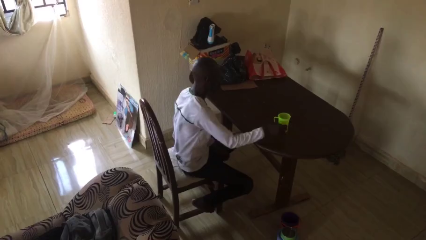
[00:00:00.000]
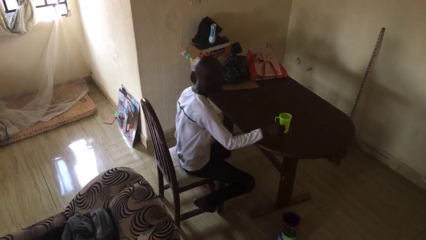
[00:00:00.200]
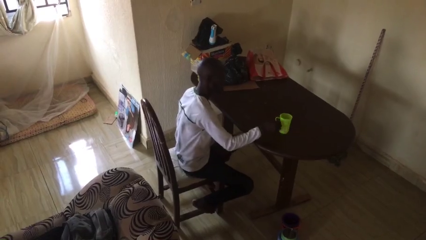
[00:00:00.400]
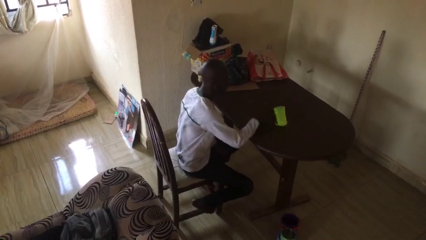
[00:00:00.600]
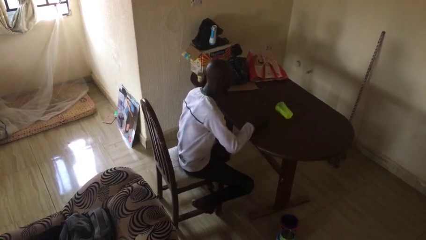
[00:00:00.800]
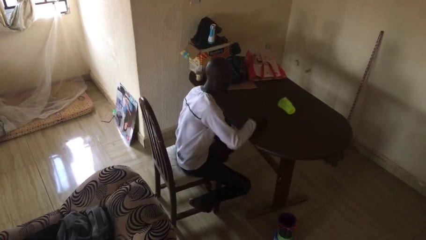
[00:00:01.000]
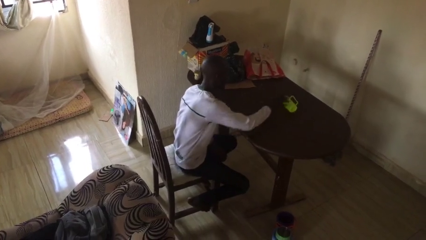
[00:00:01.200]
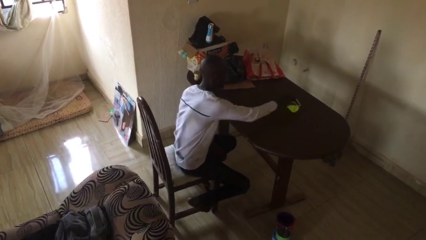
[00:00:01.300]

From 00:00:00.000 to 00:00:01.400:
person knocks over glass

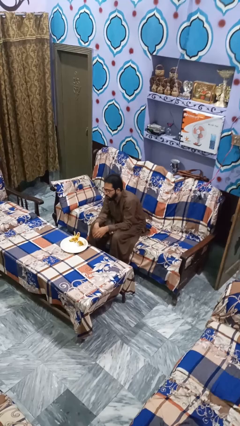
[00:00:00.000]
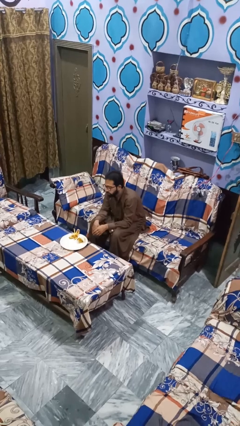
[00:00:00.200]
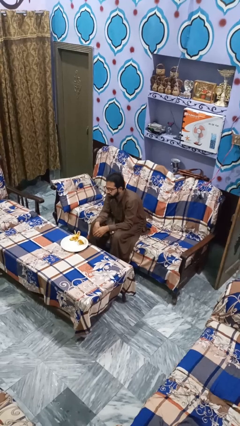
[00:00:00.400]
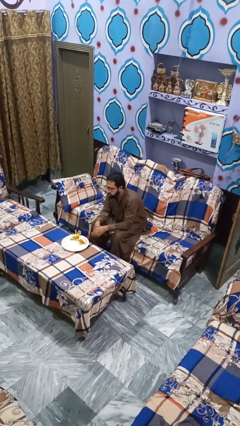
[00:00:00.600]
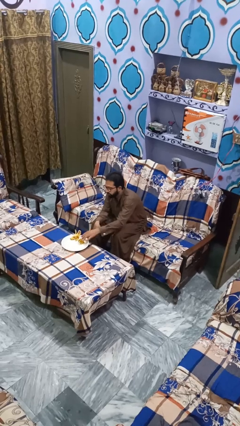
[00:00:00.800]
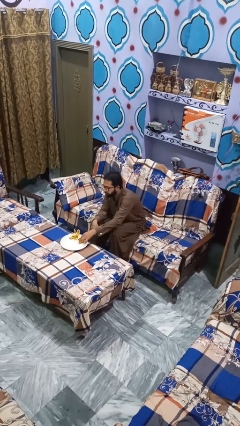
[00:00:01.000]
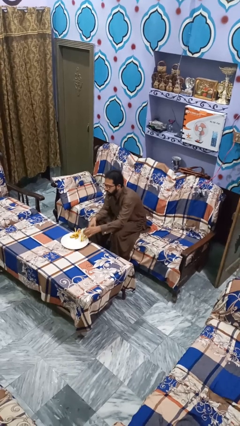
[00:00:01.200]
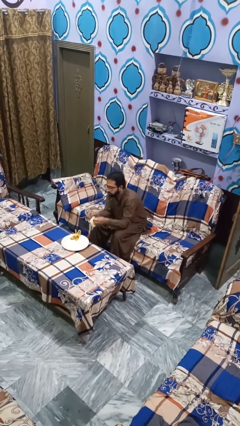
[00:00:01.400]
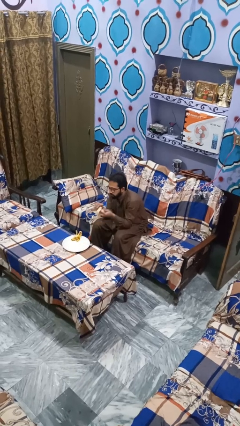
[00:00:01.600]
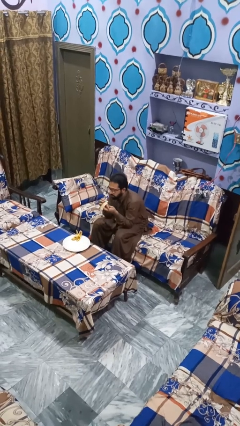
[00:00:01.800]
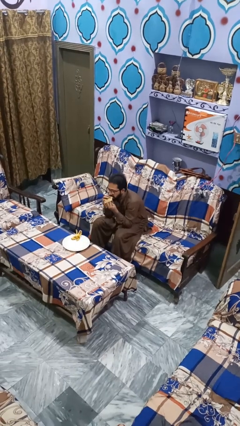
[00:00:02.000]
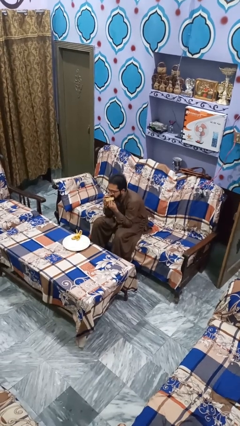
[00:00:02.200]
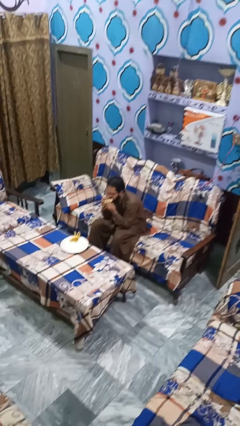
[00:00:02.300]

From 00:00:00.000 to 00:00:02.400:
person eats banana

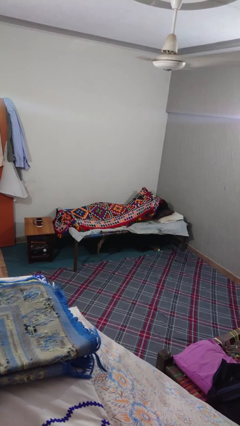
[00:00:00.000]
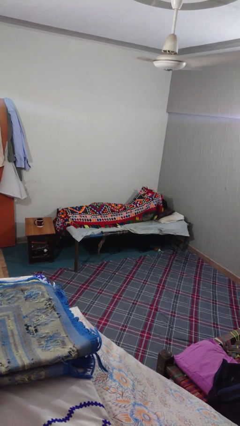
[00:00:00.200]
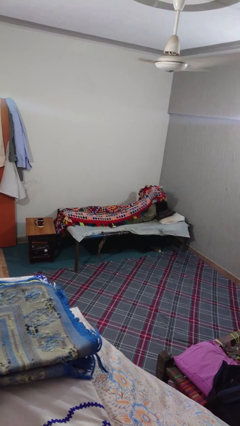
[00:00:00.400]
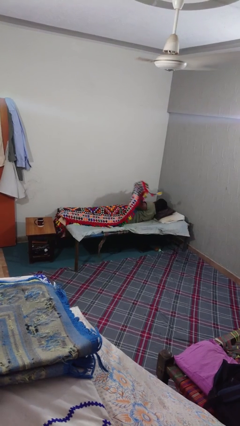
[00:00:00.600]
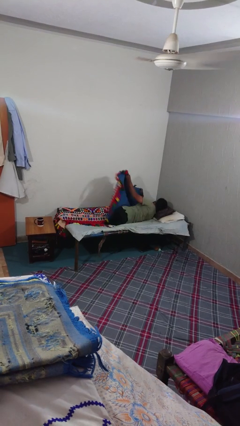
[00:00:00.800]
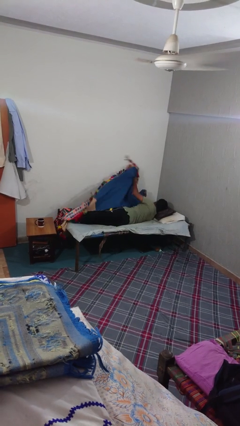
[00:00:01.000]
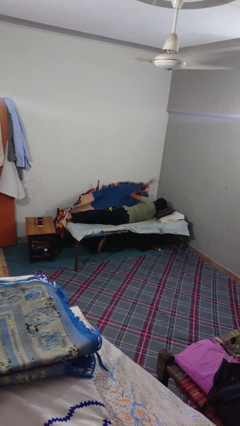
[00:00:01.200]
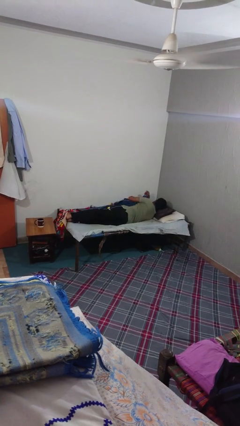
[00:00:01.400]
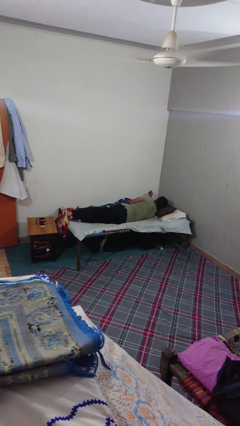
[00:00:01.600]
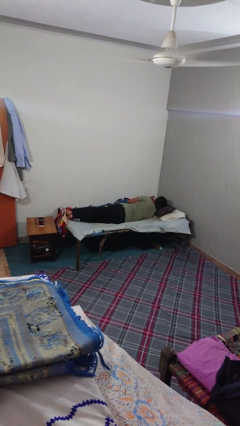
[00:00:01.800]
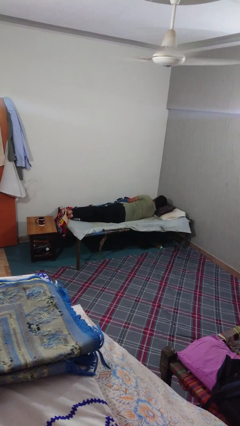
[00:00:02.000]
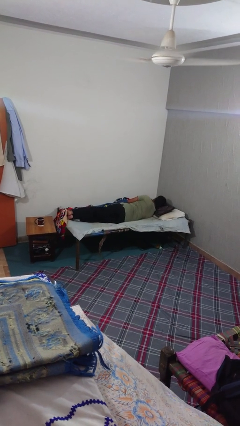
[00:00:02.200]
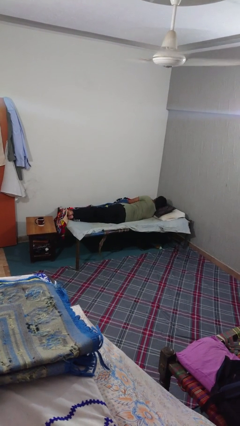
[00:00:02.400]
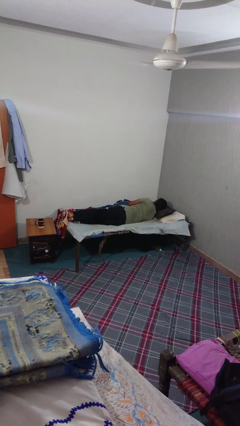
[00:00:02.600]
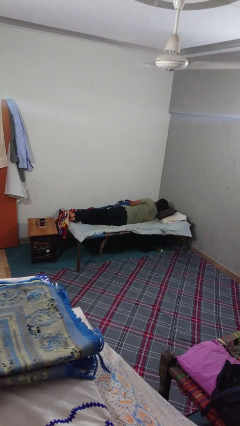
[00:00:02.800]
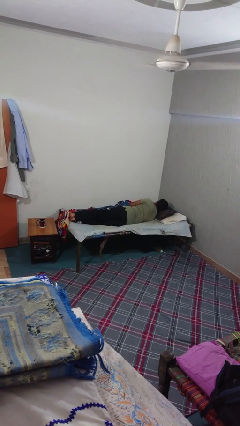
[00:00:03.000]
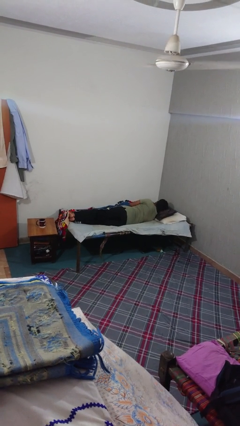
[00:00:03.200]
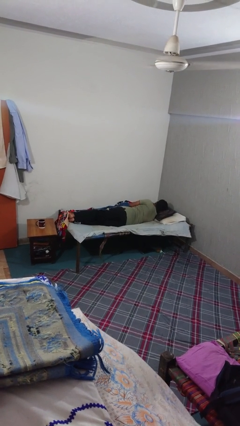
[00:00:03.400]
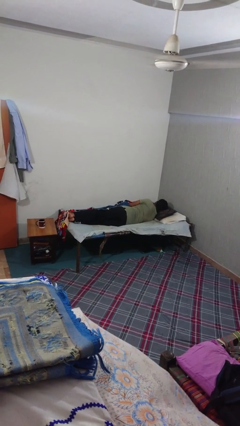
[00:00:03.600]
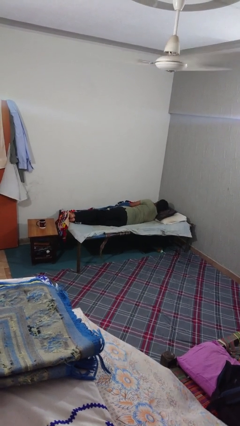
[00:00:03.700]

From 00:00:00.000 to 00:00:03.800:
person uncovers with blanket

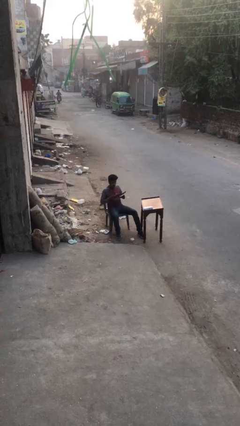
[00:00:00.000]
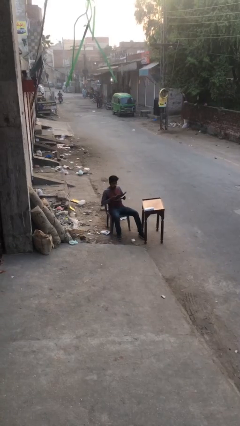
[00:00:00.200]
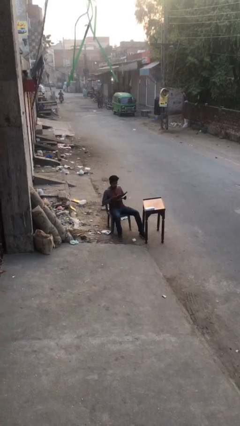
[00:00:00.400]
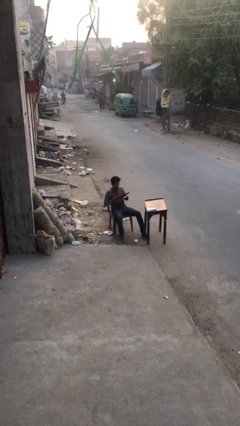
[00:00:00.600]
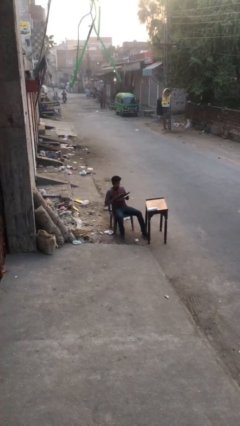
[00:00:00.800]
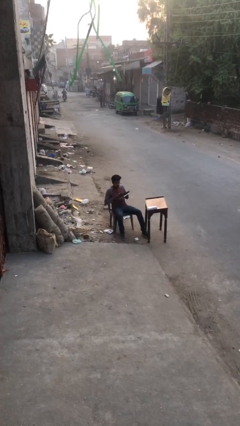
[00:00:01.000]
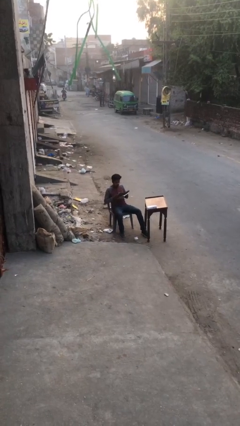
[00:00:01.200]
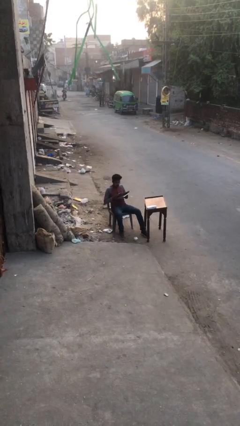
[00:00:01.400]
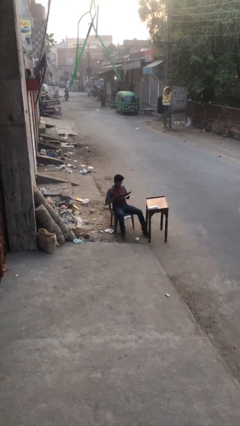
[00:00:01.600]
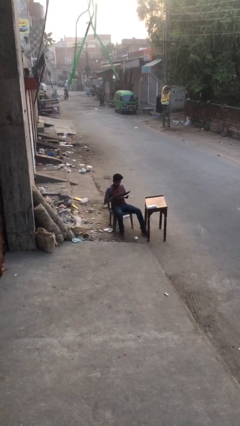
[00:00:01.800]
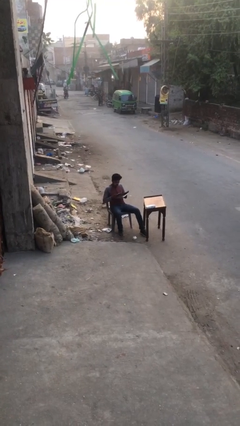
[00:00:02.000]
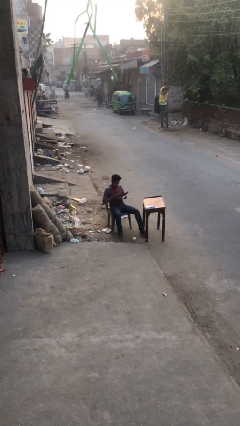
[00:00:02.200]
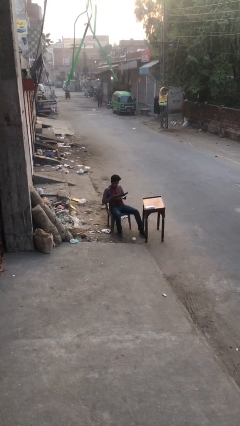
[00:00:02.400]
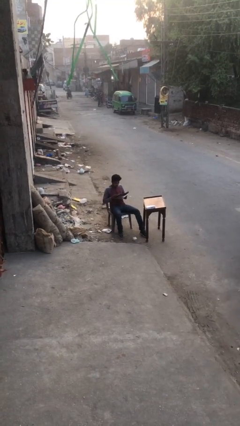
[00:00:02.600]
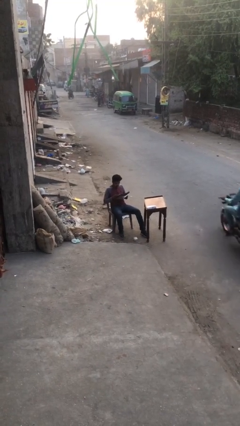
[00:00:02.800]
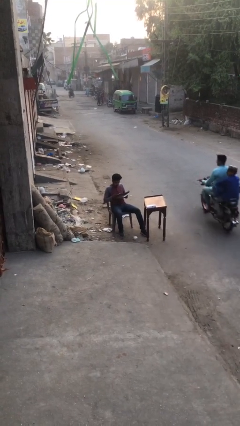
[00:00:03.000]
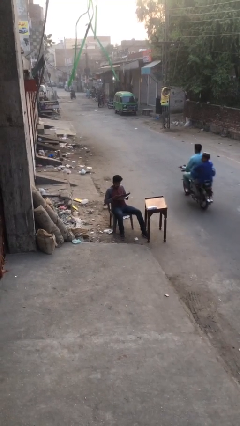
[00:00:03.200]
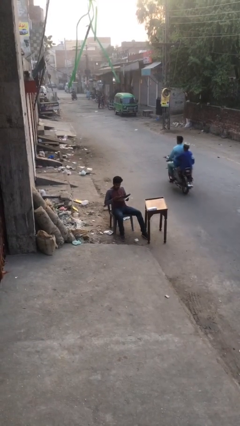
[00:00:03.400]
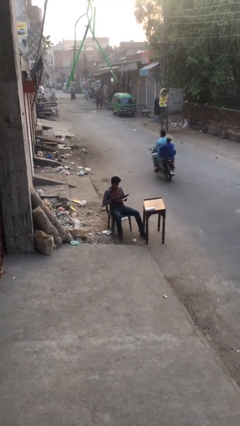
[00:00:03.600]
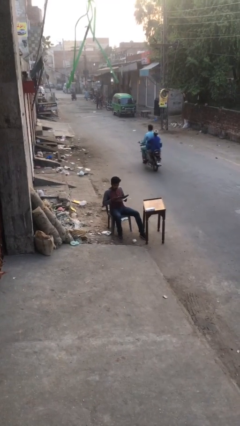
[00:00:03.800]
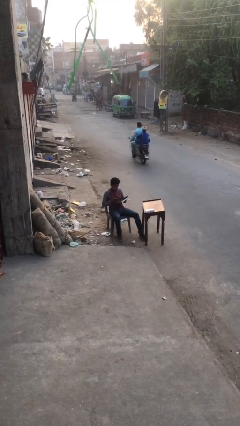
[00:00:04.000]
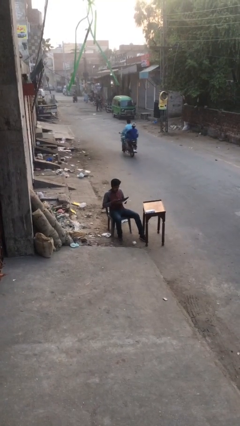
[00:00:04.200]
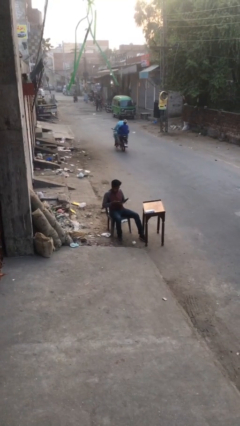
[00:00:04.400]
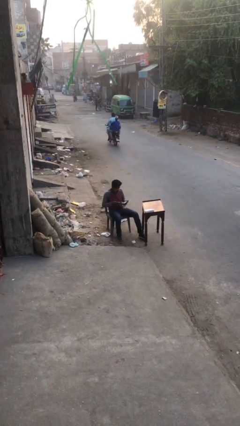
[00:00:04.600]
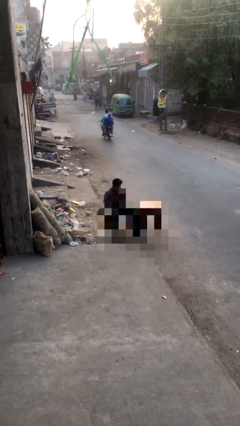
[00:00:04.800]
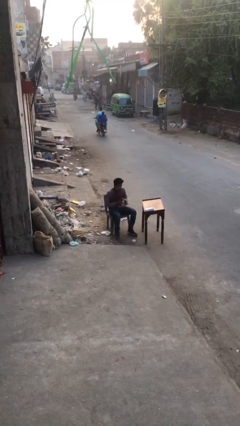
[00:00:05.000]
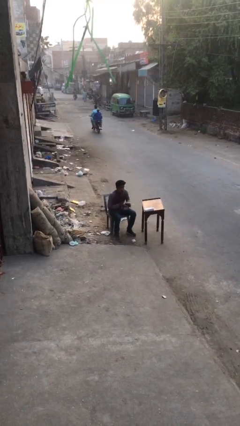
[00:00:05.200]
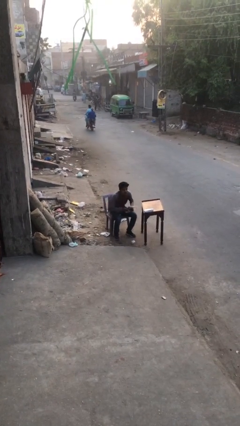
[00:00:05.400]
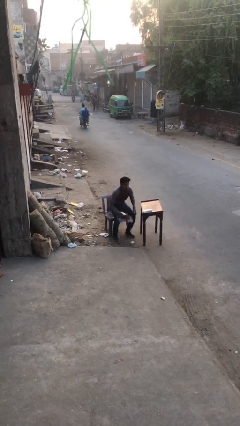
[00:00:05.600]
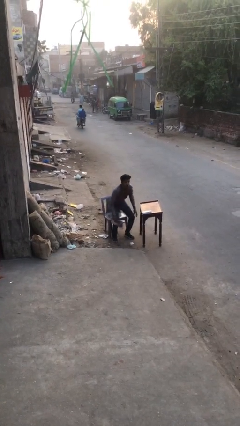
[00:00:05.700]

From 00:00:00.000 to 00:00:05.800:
person reads document

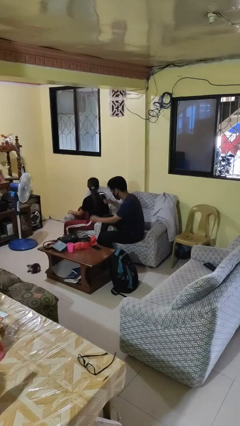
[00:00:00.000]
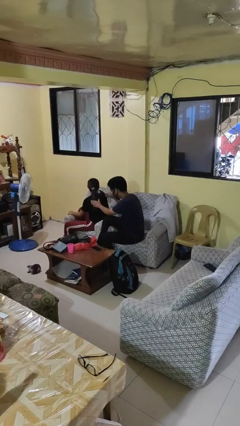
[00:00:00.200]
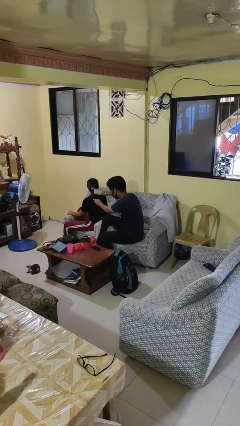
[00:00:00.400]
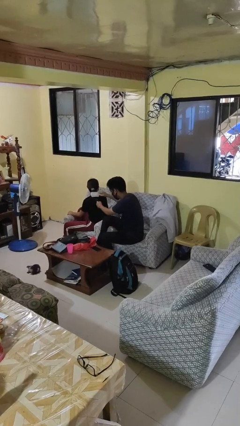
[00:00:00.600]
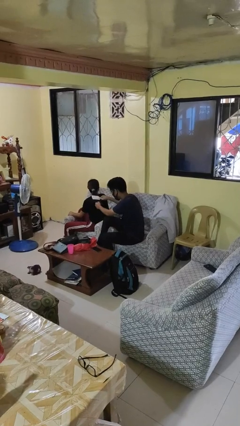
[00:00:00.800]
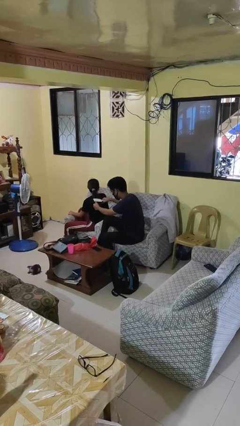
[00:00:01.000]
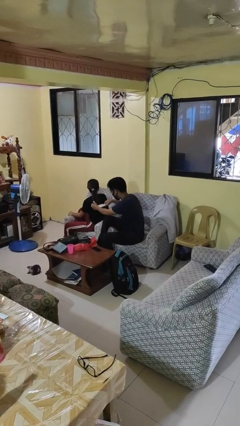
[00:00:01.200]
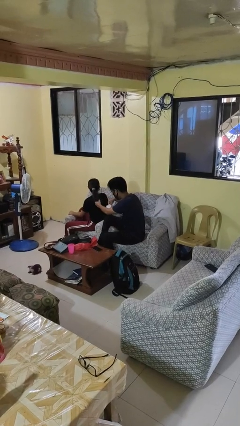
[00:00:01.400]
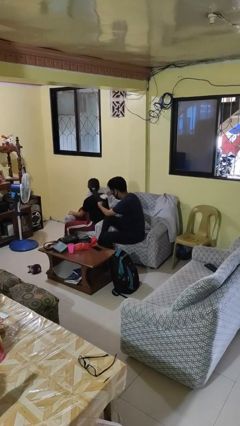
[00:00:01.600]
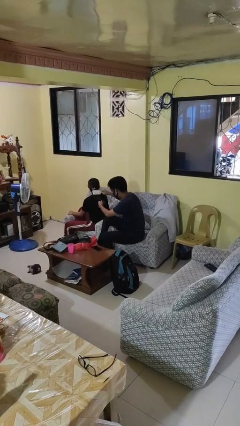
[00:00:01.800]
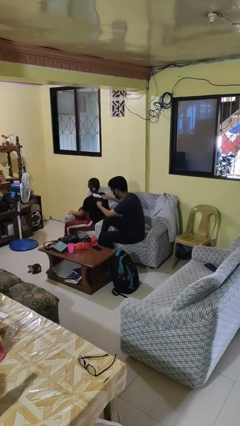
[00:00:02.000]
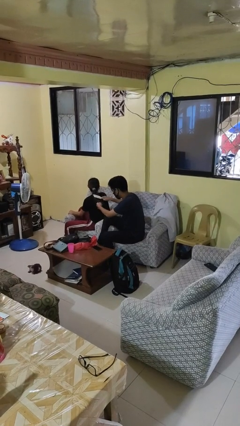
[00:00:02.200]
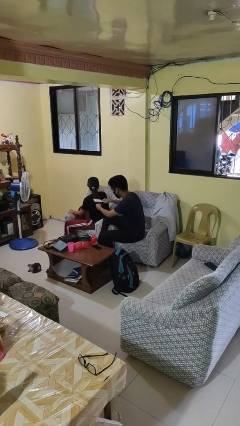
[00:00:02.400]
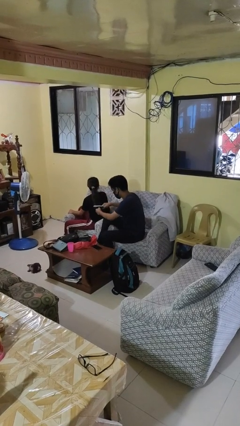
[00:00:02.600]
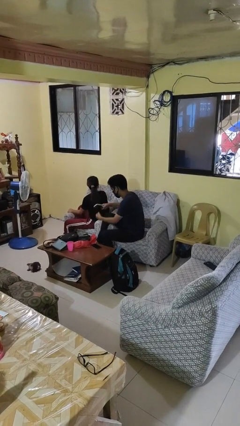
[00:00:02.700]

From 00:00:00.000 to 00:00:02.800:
person brushes hair of person

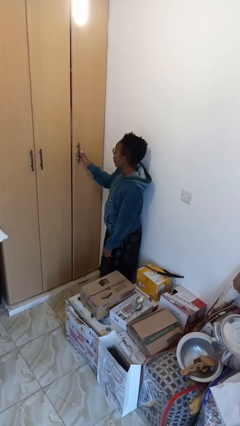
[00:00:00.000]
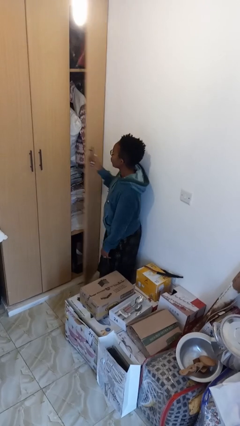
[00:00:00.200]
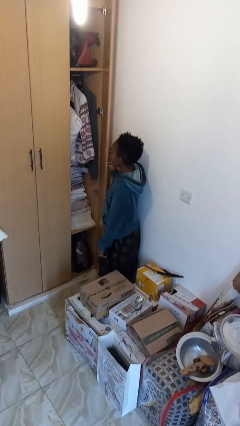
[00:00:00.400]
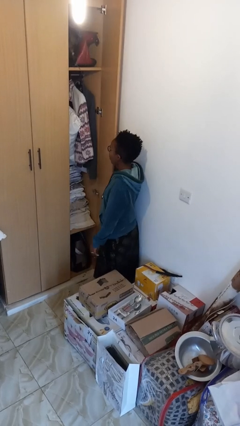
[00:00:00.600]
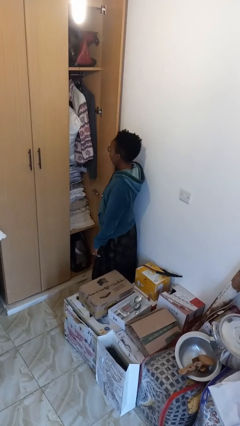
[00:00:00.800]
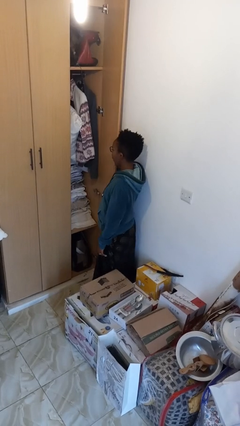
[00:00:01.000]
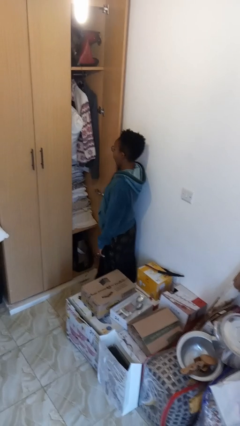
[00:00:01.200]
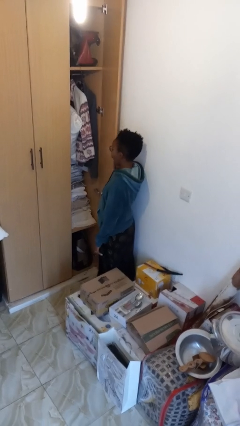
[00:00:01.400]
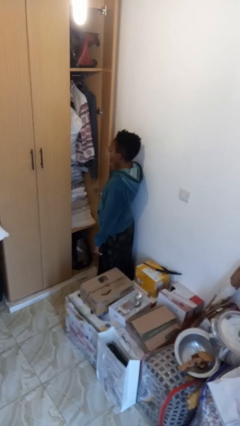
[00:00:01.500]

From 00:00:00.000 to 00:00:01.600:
person opens closet door
